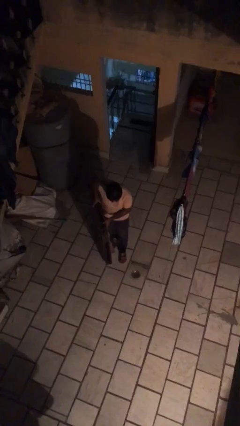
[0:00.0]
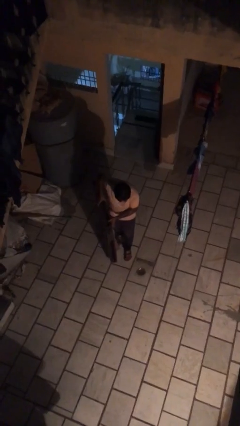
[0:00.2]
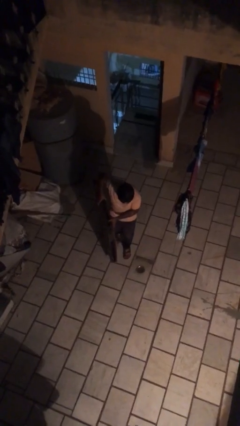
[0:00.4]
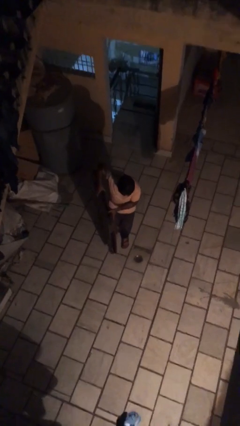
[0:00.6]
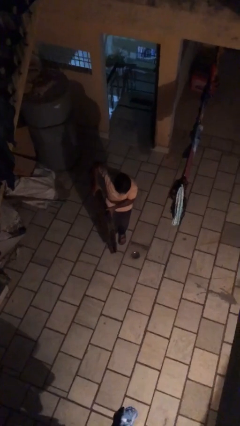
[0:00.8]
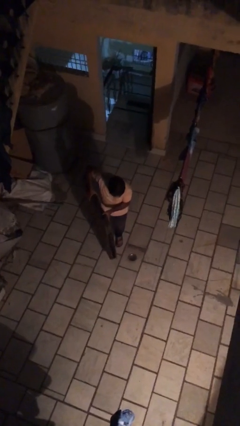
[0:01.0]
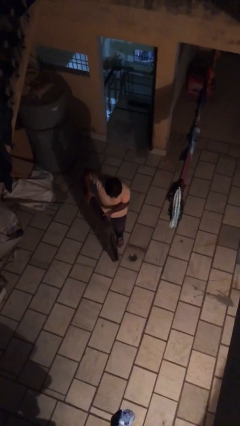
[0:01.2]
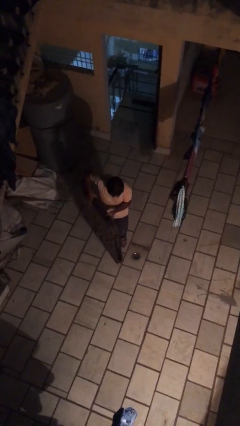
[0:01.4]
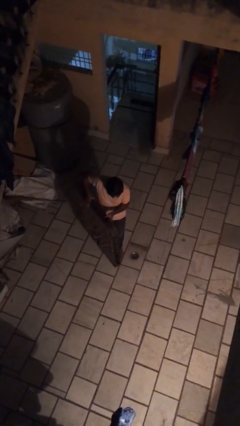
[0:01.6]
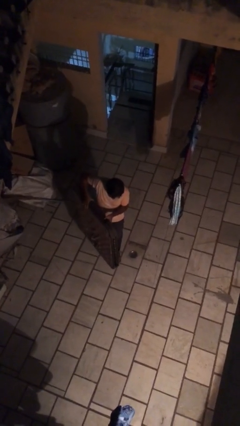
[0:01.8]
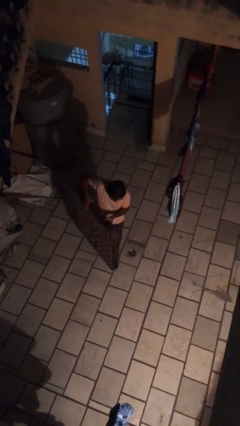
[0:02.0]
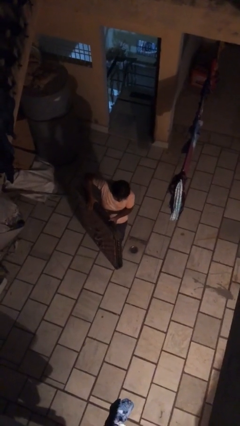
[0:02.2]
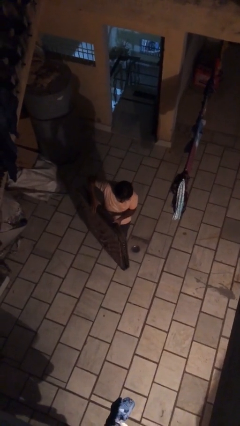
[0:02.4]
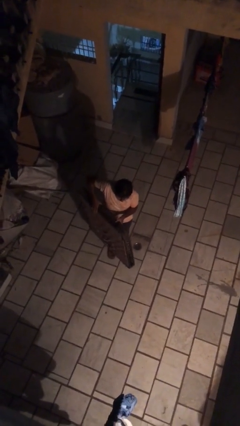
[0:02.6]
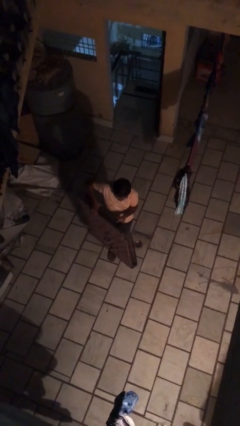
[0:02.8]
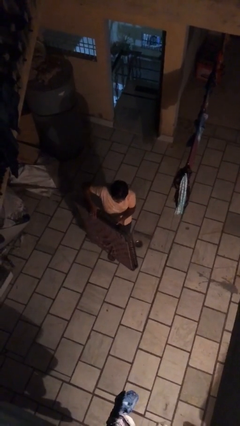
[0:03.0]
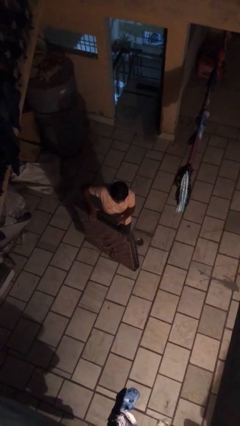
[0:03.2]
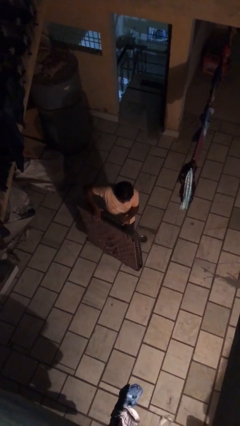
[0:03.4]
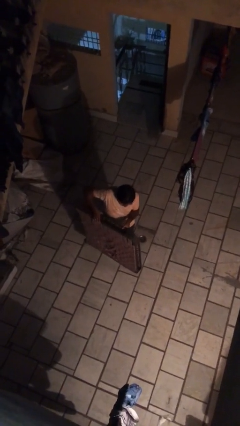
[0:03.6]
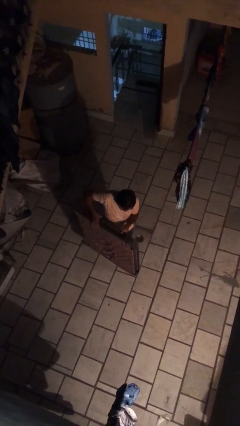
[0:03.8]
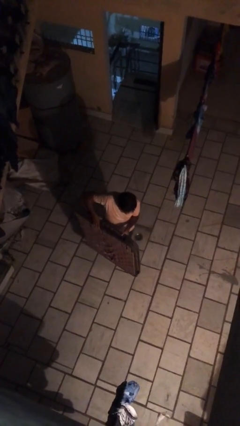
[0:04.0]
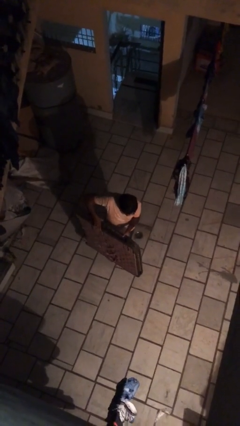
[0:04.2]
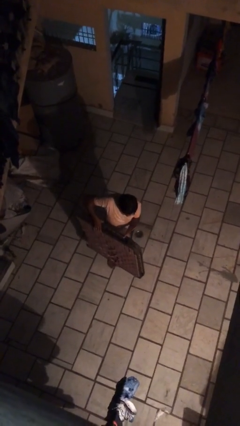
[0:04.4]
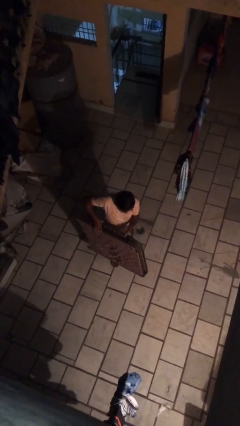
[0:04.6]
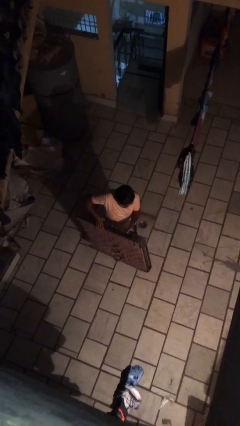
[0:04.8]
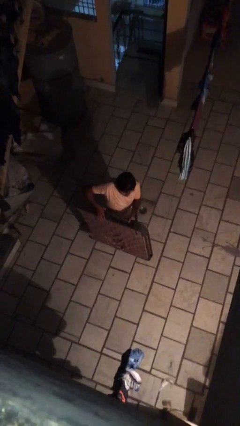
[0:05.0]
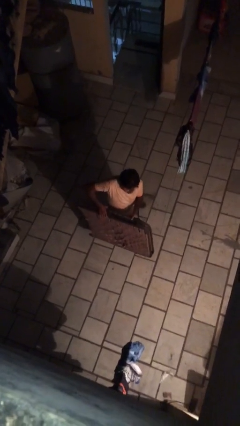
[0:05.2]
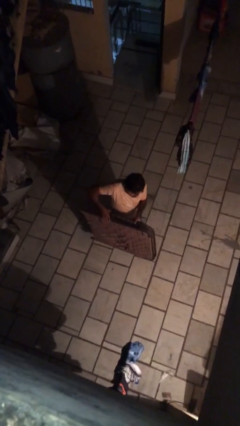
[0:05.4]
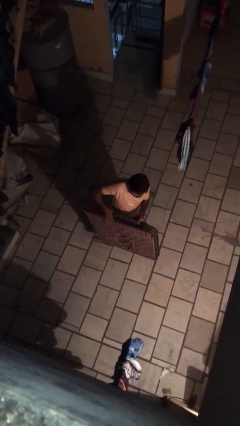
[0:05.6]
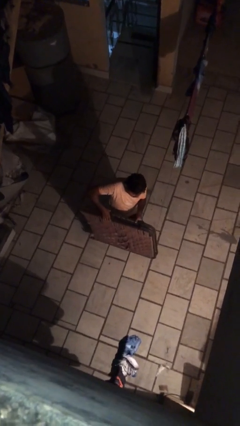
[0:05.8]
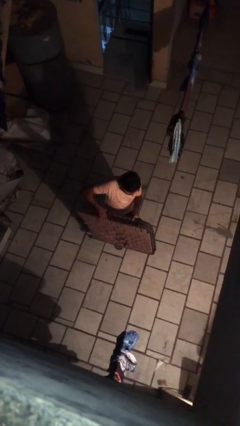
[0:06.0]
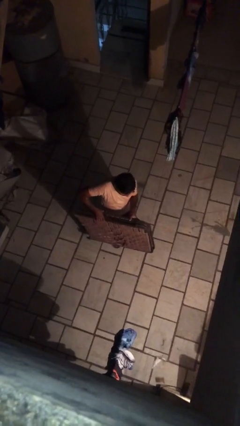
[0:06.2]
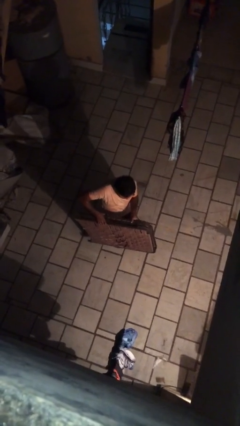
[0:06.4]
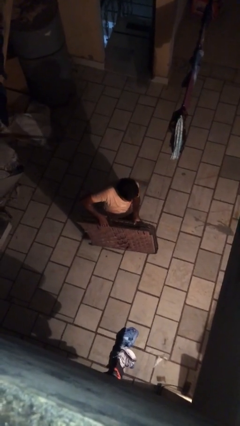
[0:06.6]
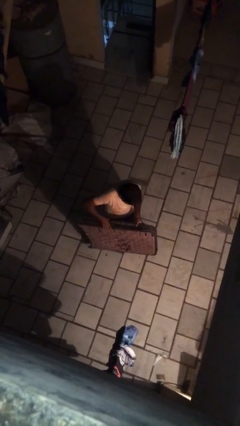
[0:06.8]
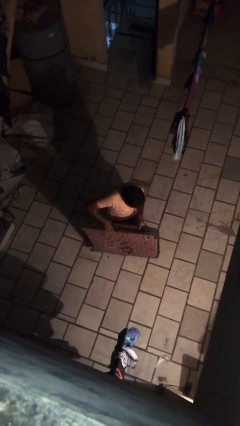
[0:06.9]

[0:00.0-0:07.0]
person carries heavy object

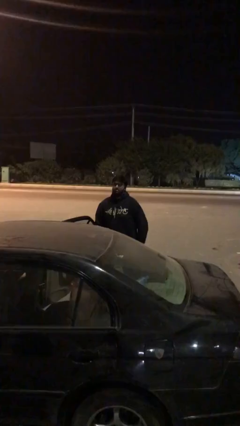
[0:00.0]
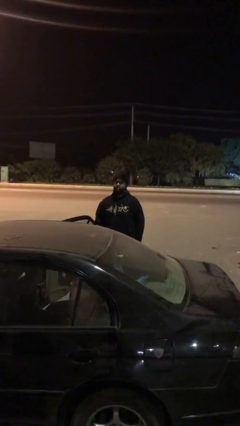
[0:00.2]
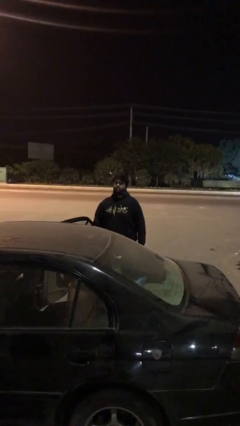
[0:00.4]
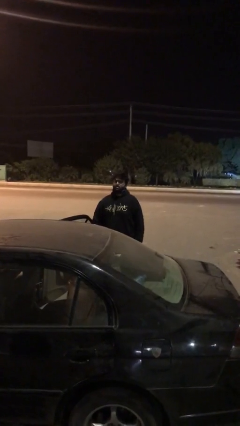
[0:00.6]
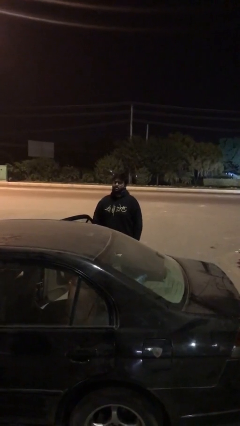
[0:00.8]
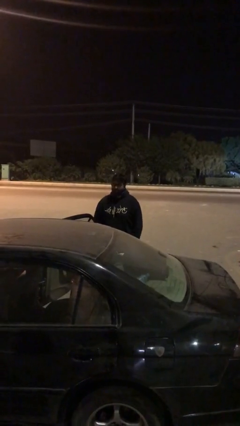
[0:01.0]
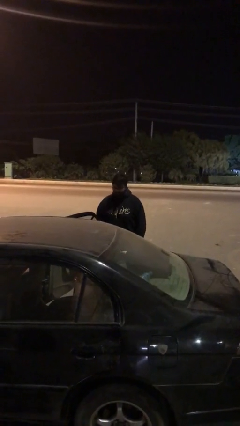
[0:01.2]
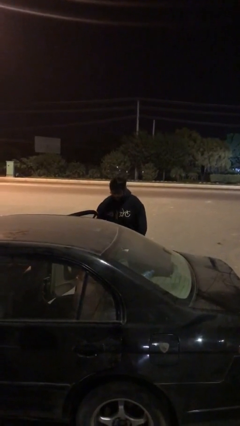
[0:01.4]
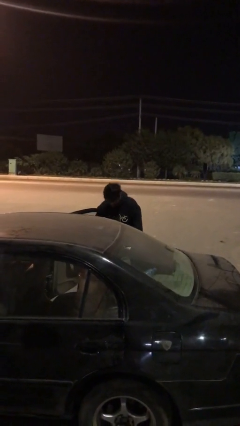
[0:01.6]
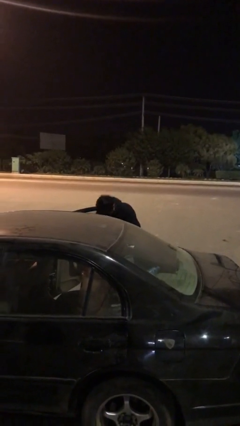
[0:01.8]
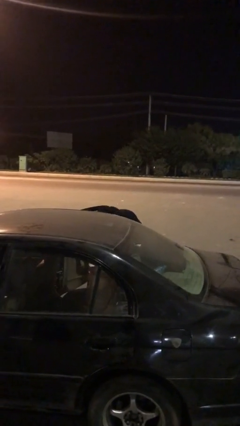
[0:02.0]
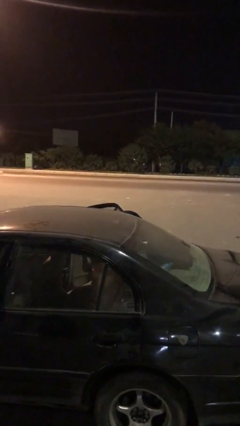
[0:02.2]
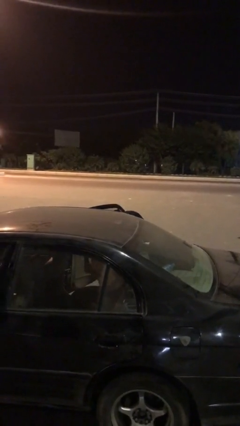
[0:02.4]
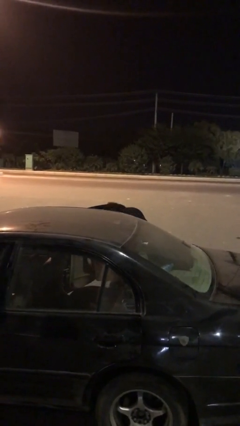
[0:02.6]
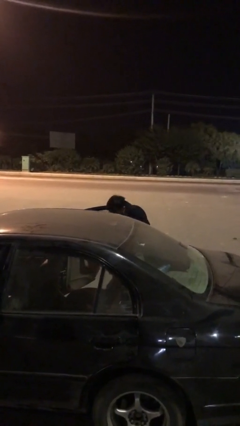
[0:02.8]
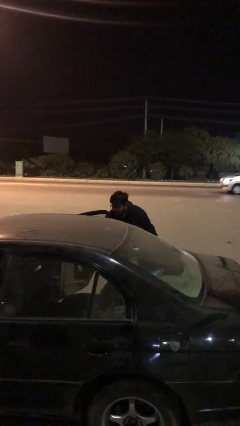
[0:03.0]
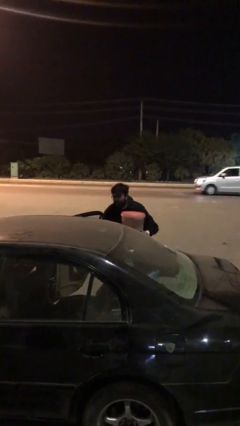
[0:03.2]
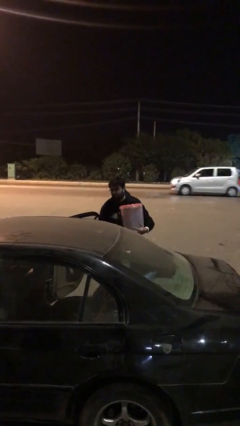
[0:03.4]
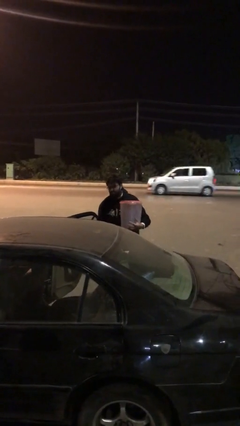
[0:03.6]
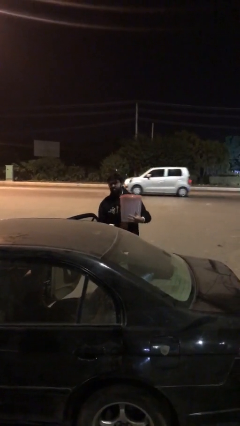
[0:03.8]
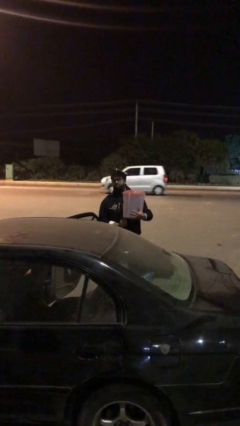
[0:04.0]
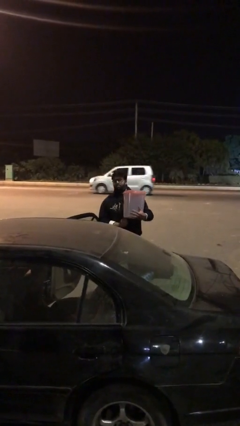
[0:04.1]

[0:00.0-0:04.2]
person unloads car

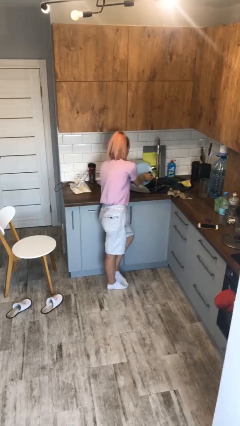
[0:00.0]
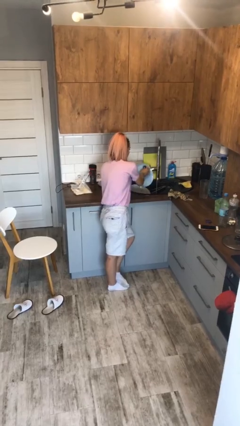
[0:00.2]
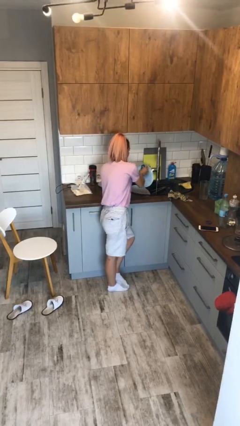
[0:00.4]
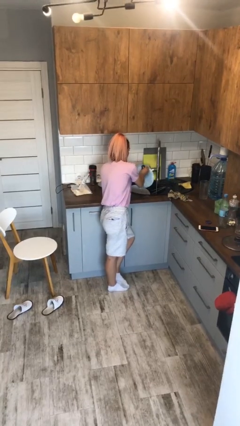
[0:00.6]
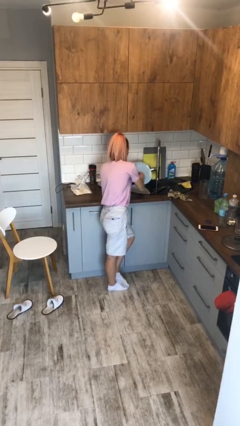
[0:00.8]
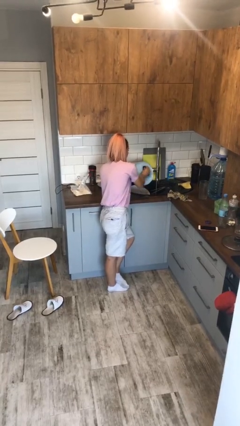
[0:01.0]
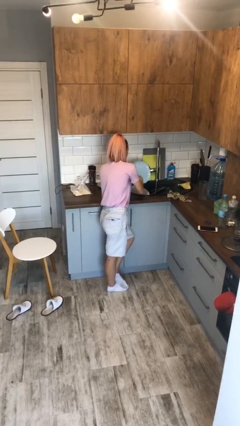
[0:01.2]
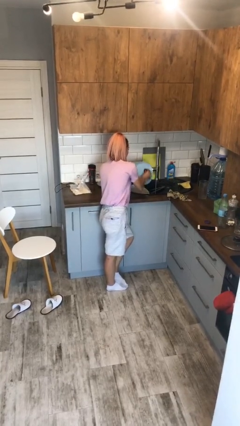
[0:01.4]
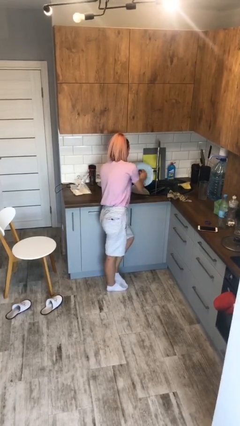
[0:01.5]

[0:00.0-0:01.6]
person washes dish

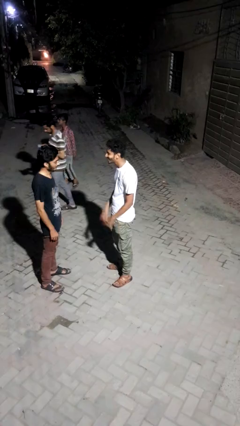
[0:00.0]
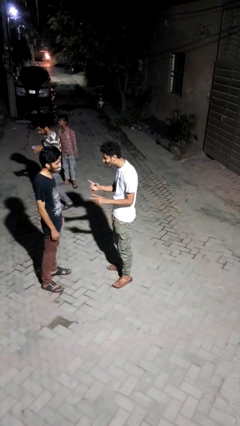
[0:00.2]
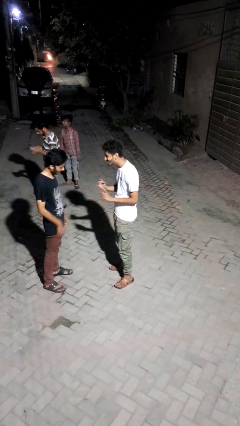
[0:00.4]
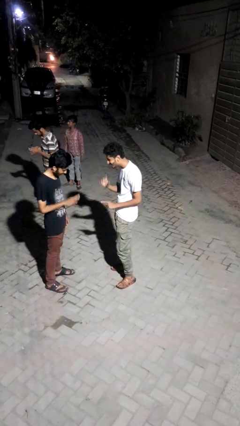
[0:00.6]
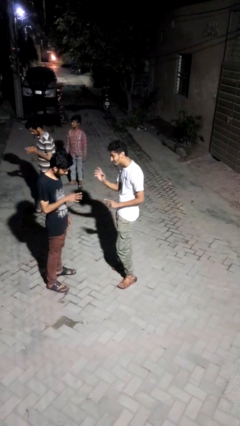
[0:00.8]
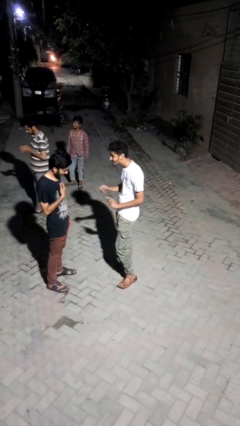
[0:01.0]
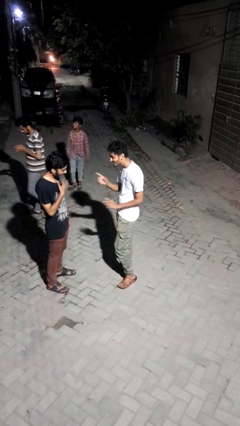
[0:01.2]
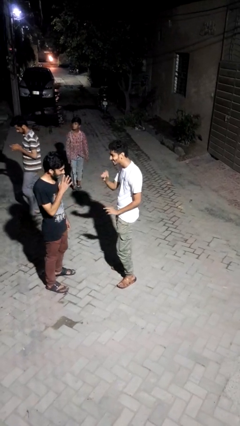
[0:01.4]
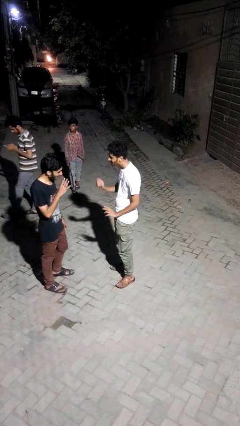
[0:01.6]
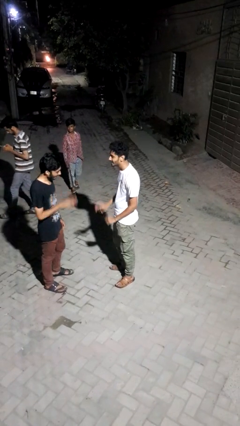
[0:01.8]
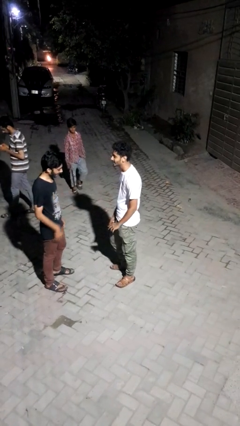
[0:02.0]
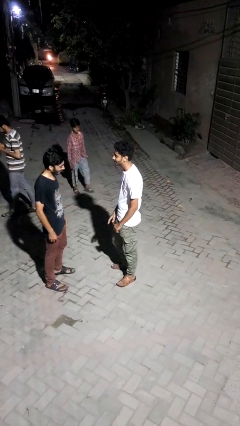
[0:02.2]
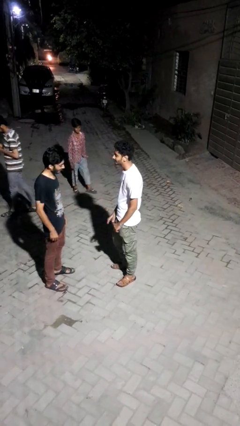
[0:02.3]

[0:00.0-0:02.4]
person talks to person

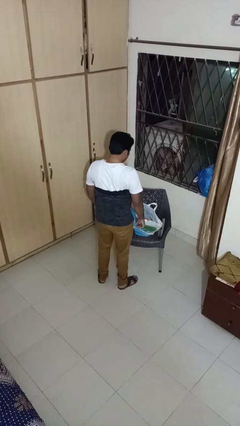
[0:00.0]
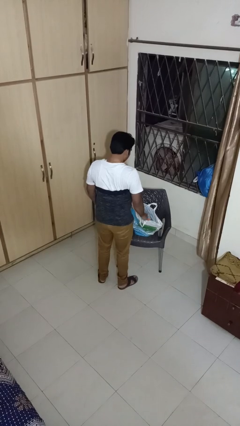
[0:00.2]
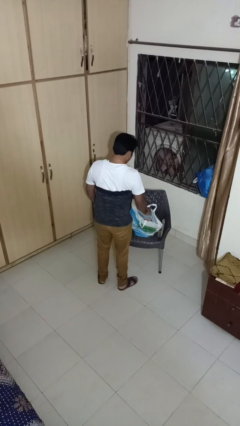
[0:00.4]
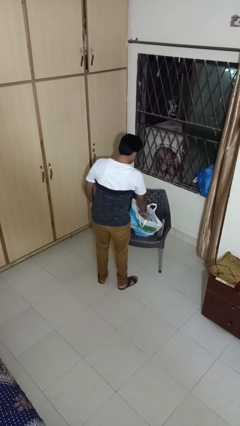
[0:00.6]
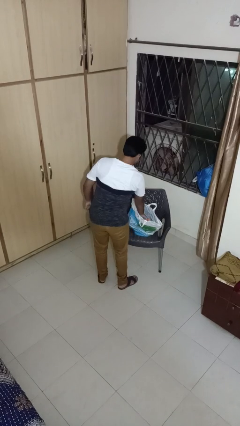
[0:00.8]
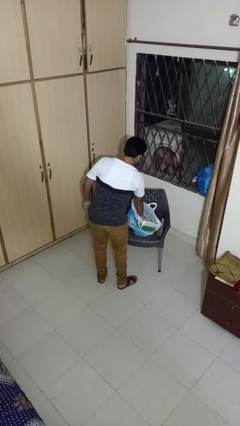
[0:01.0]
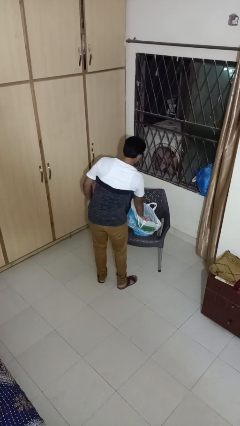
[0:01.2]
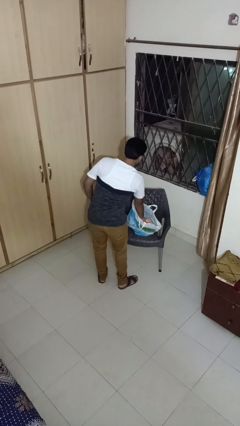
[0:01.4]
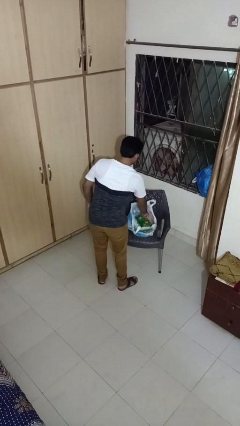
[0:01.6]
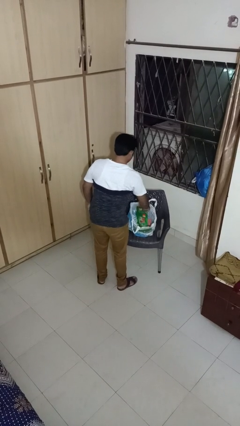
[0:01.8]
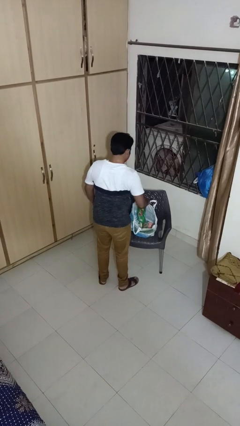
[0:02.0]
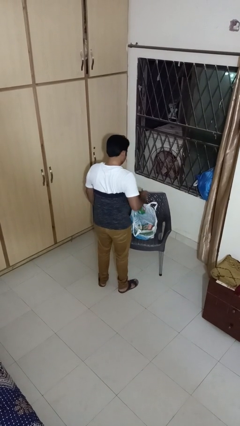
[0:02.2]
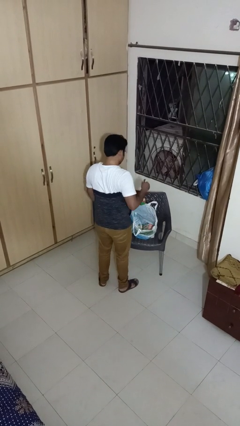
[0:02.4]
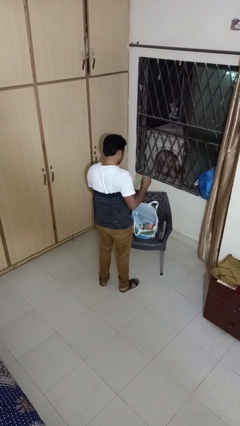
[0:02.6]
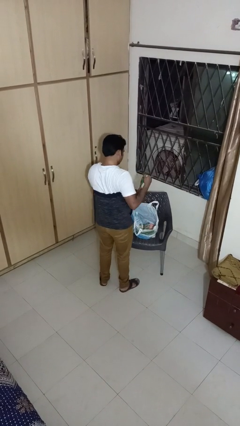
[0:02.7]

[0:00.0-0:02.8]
person takes object from bag
